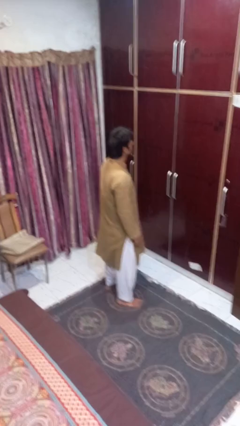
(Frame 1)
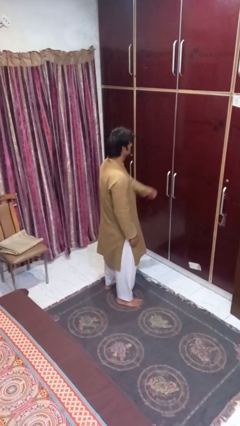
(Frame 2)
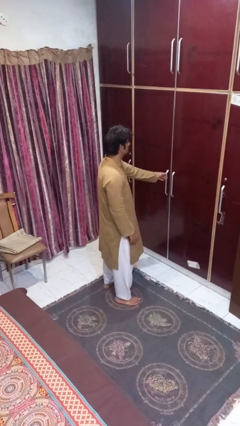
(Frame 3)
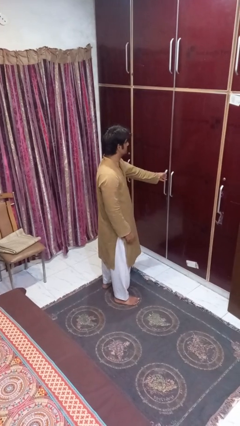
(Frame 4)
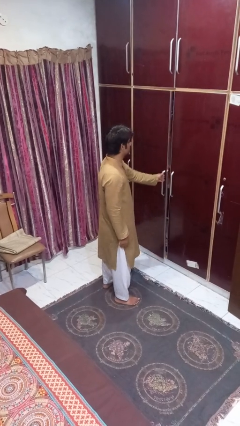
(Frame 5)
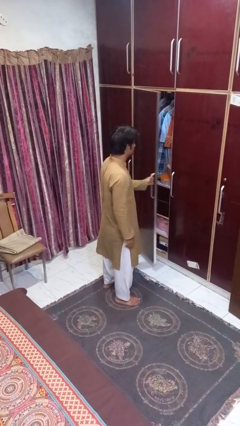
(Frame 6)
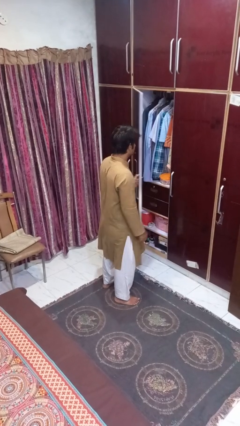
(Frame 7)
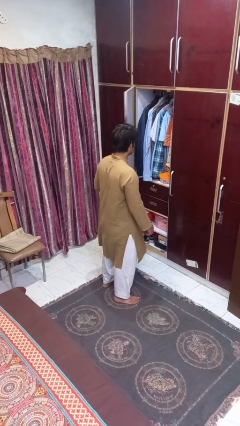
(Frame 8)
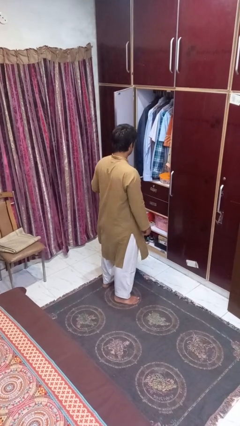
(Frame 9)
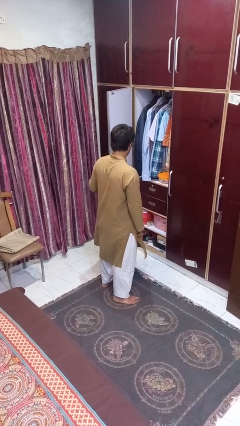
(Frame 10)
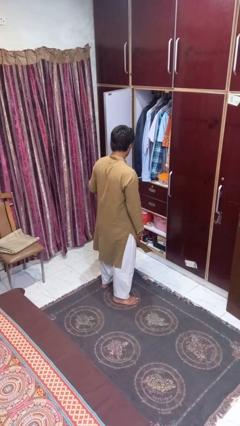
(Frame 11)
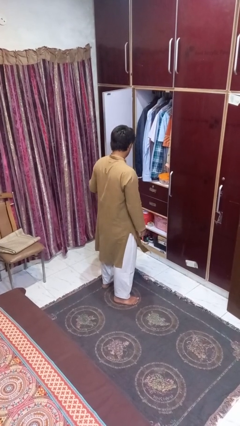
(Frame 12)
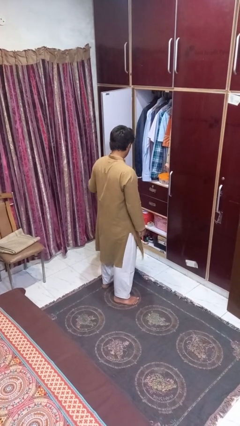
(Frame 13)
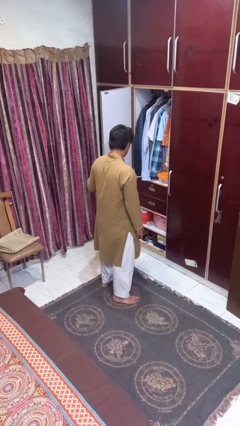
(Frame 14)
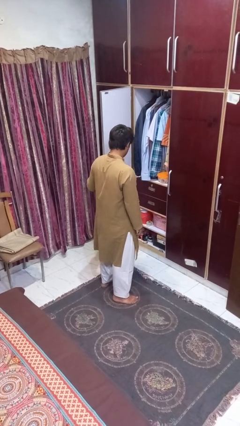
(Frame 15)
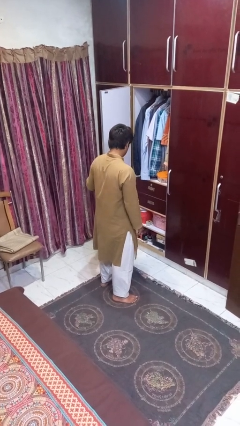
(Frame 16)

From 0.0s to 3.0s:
person opens closet door

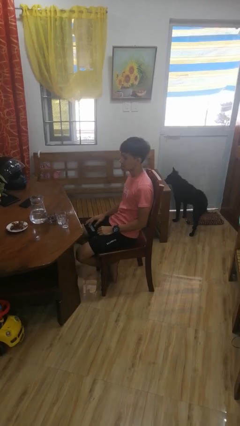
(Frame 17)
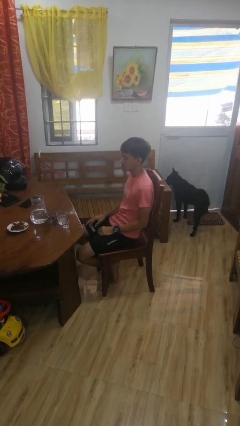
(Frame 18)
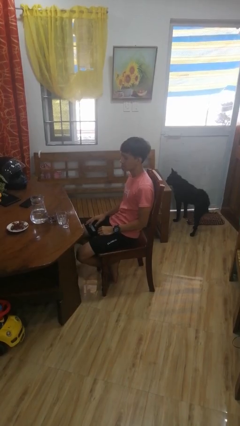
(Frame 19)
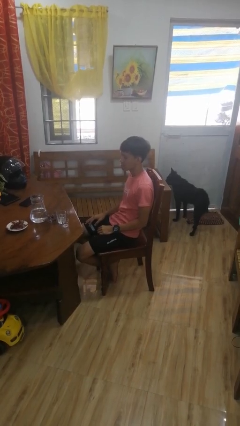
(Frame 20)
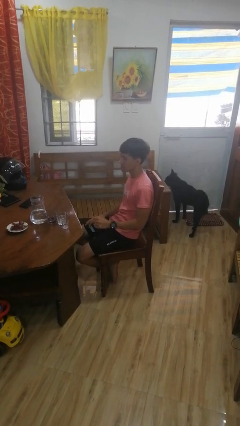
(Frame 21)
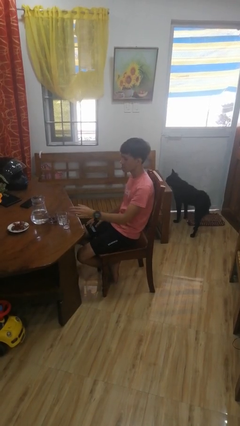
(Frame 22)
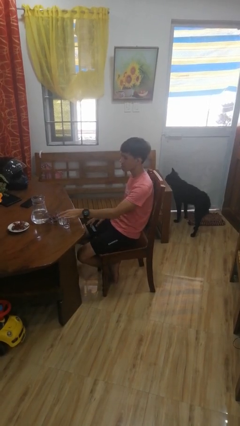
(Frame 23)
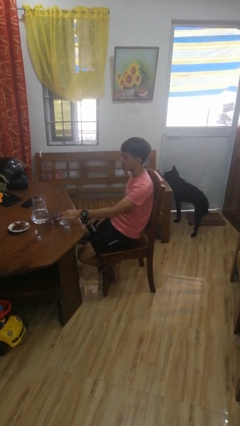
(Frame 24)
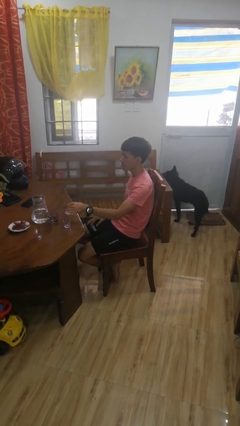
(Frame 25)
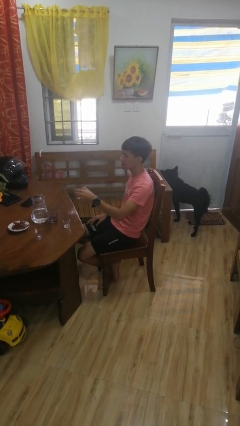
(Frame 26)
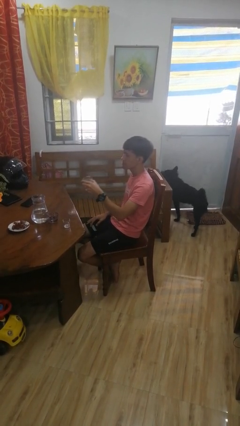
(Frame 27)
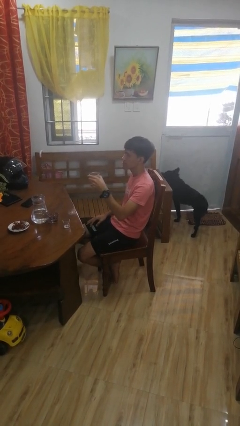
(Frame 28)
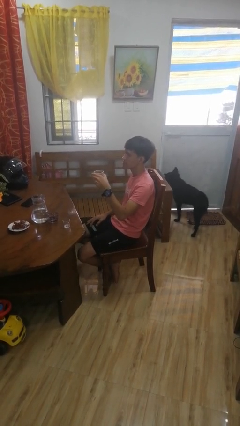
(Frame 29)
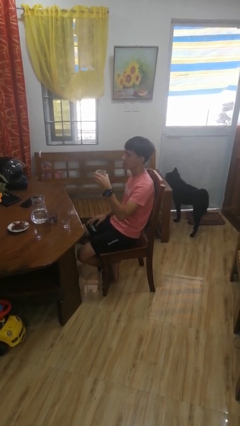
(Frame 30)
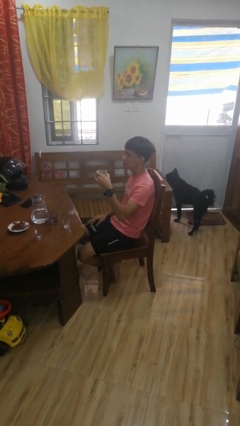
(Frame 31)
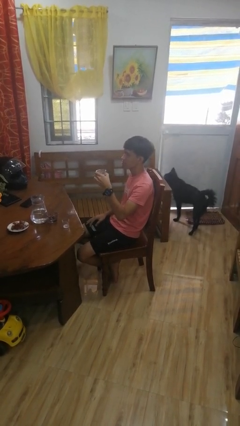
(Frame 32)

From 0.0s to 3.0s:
person picks up object from table

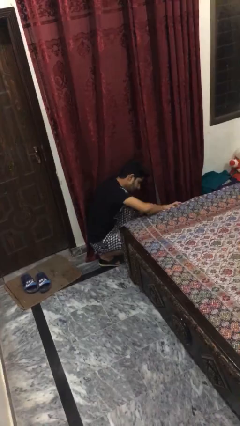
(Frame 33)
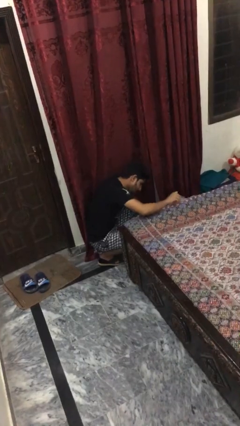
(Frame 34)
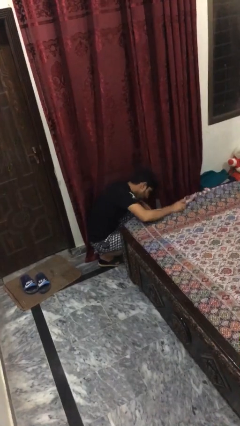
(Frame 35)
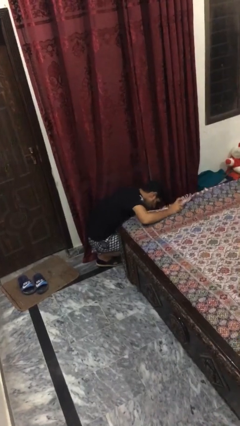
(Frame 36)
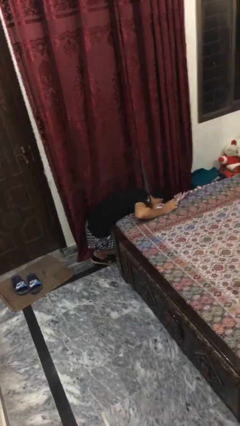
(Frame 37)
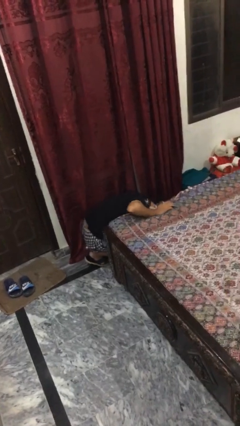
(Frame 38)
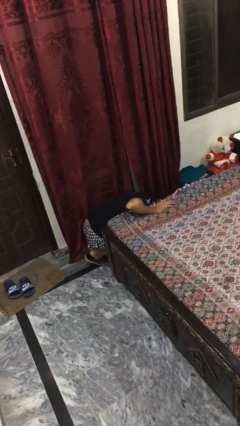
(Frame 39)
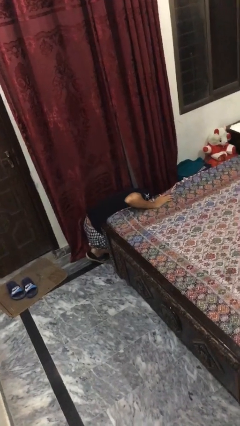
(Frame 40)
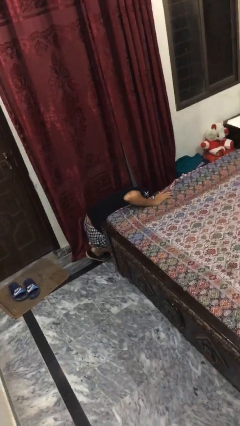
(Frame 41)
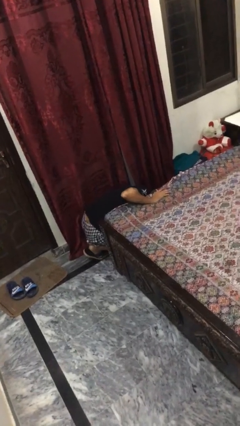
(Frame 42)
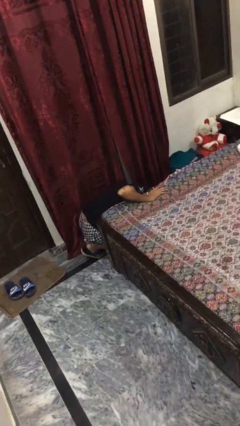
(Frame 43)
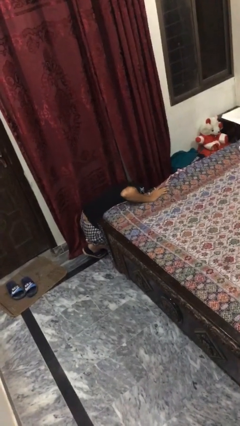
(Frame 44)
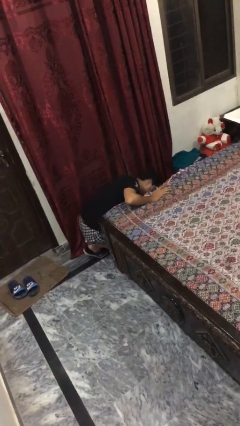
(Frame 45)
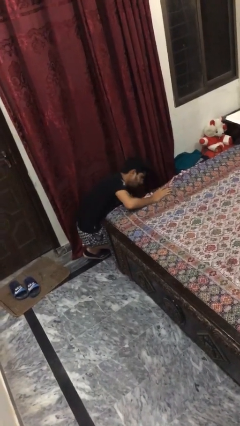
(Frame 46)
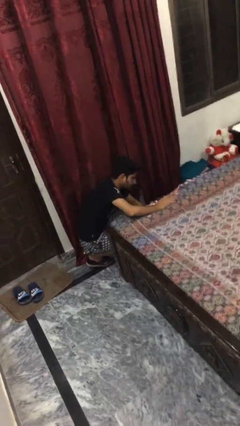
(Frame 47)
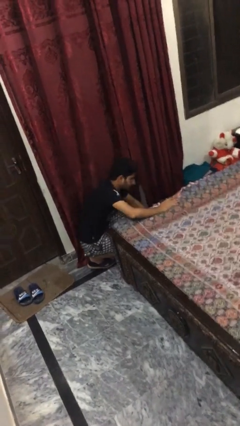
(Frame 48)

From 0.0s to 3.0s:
person searches under bed

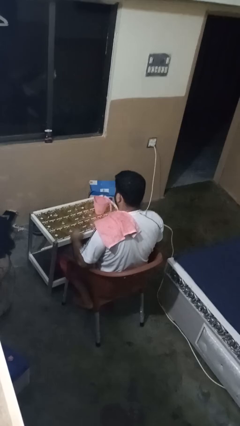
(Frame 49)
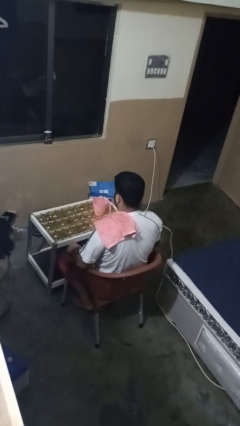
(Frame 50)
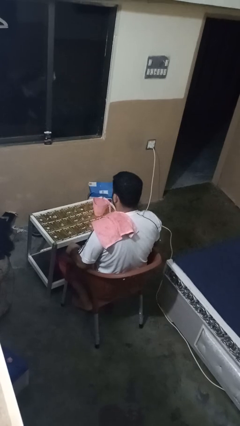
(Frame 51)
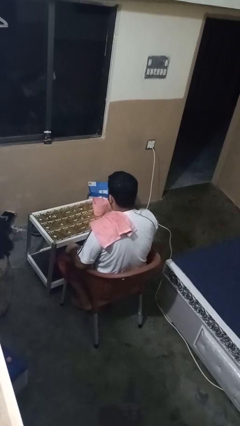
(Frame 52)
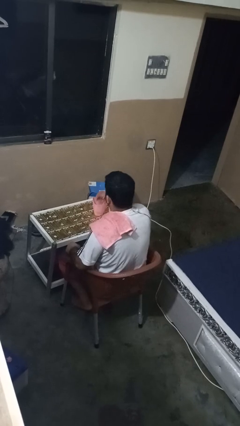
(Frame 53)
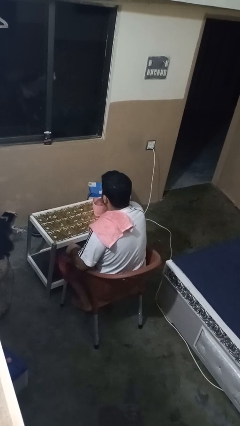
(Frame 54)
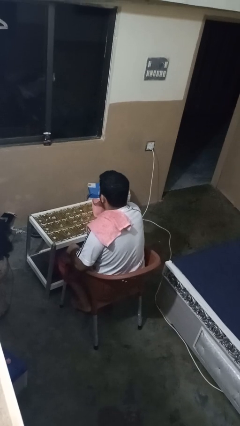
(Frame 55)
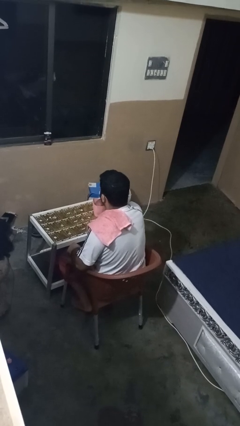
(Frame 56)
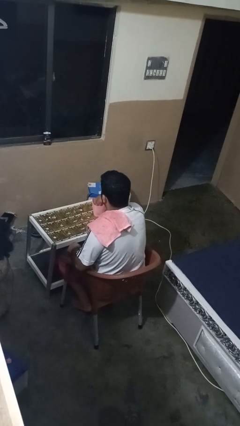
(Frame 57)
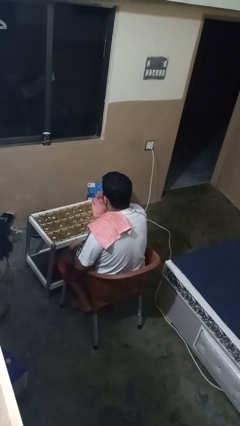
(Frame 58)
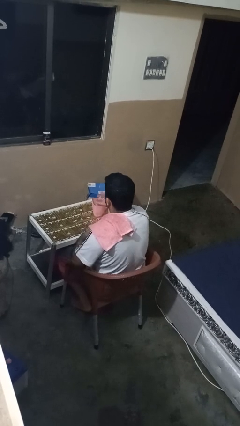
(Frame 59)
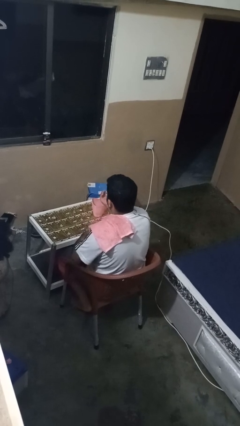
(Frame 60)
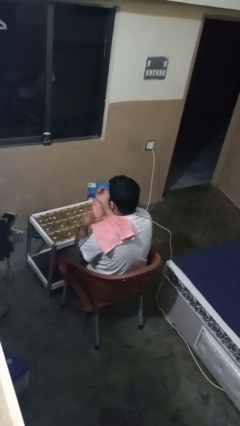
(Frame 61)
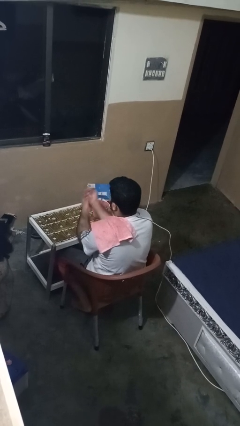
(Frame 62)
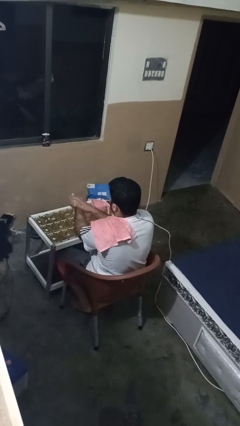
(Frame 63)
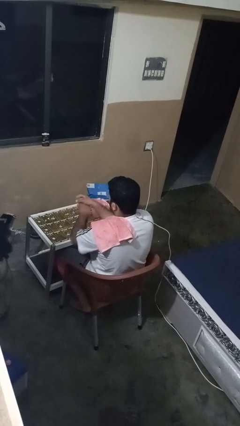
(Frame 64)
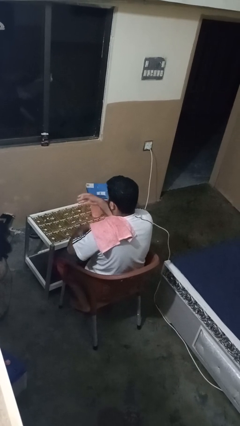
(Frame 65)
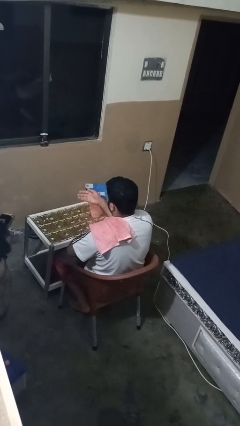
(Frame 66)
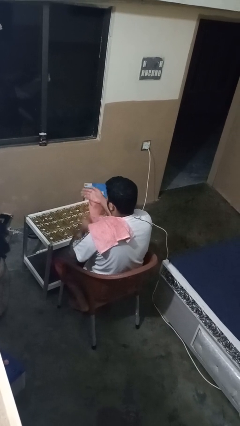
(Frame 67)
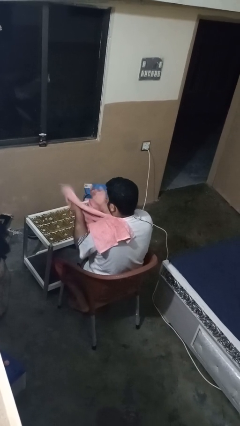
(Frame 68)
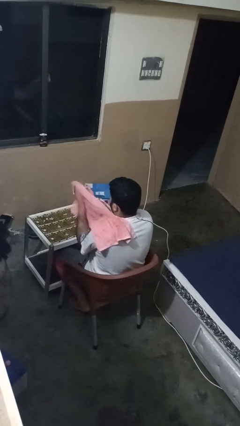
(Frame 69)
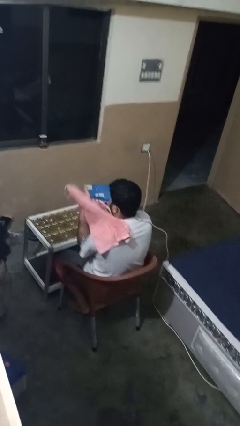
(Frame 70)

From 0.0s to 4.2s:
person washes hands

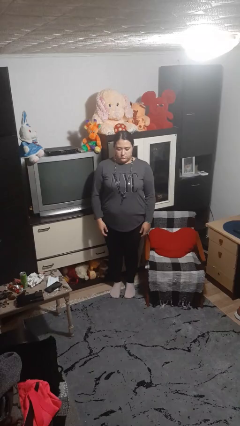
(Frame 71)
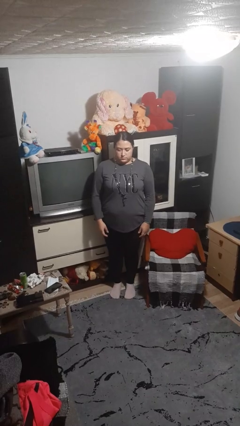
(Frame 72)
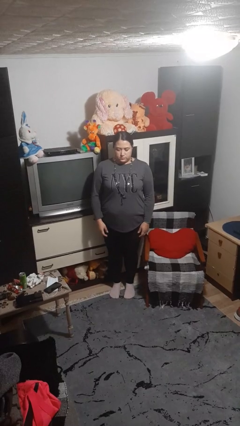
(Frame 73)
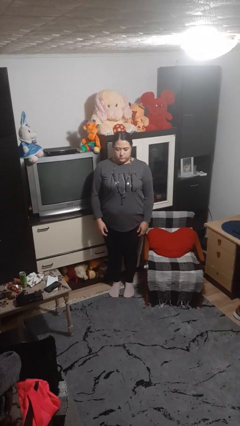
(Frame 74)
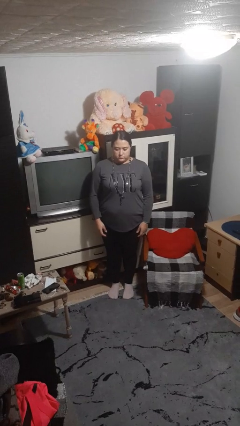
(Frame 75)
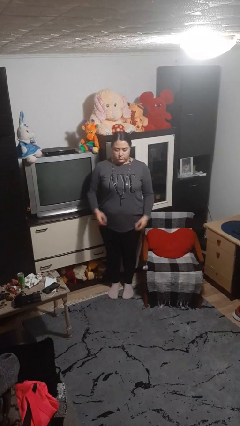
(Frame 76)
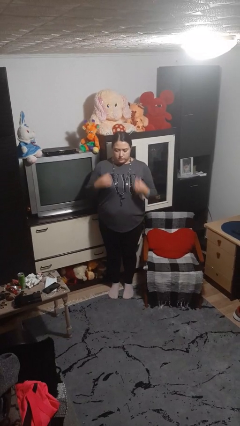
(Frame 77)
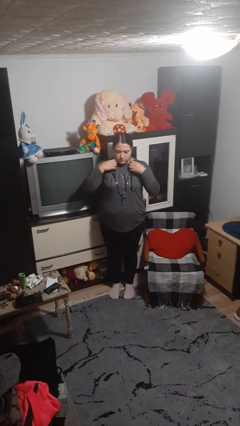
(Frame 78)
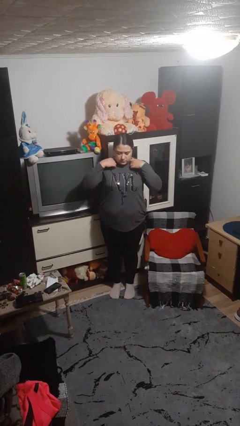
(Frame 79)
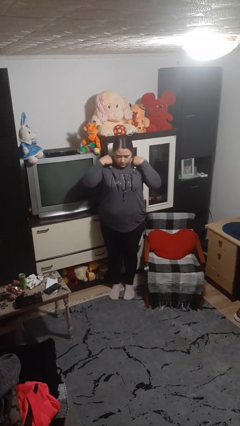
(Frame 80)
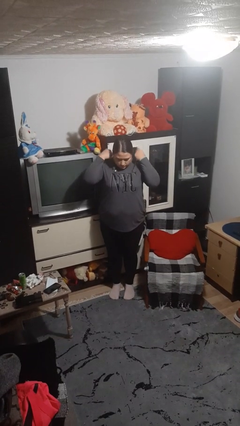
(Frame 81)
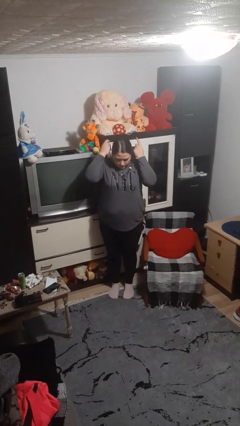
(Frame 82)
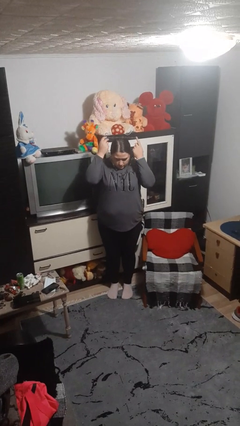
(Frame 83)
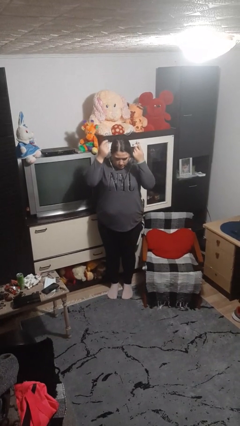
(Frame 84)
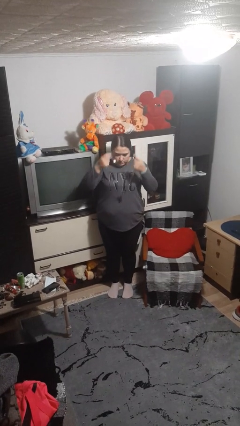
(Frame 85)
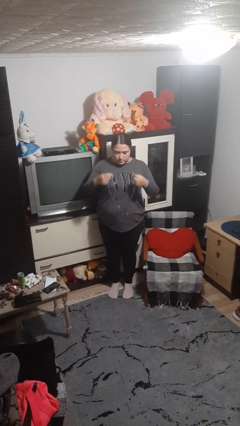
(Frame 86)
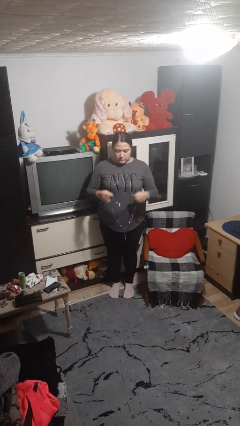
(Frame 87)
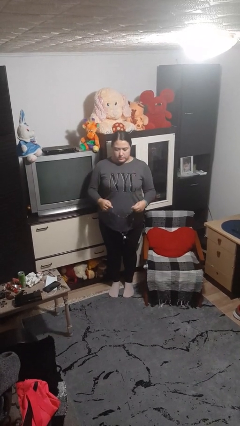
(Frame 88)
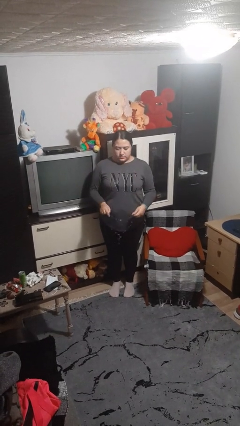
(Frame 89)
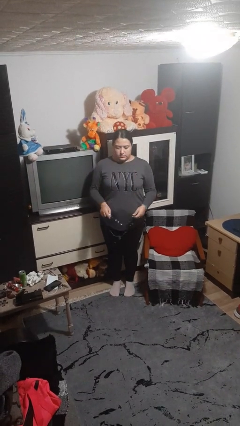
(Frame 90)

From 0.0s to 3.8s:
person takes off necklace

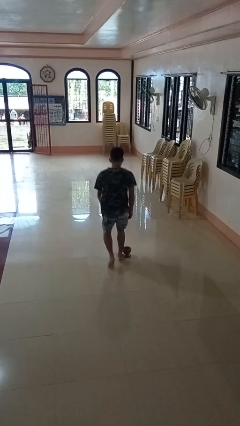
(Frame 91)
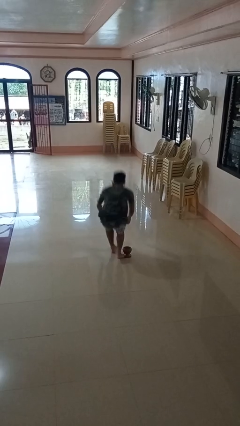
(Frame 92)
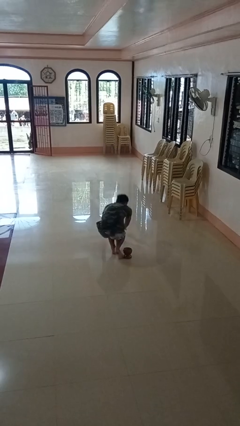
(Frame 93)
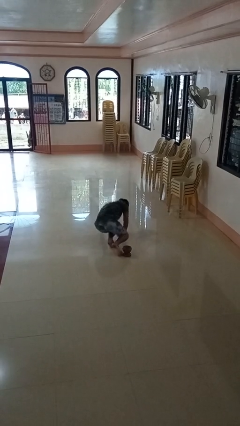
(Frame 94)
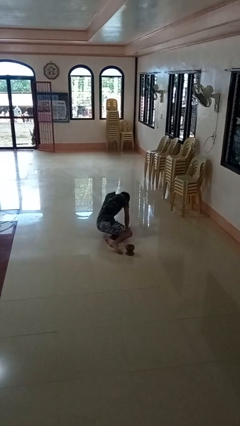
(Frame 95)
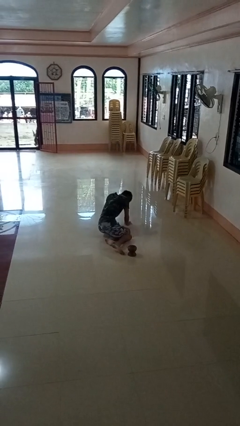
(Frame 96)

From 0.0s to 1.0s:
person trips on object on floor
